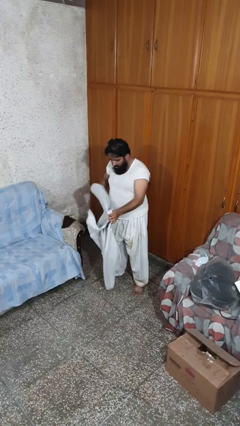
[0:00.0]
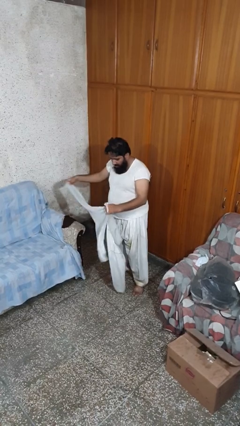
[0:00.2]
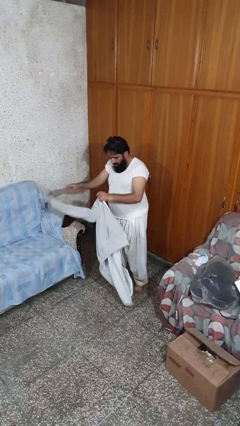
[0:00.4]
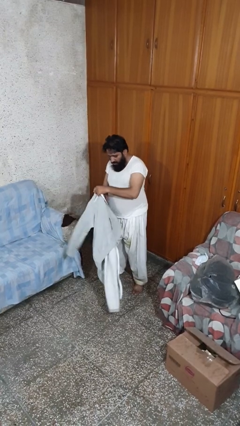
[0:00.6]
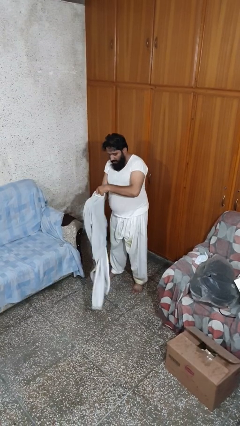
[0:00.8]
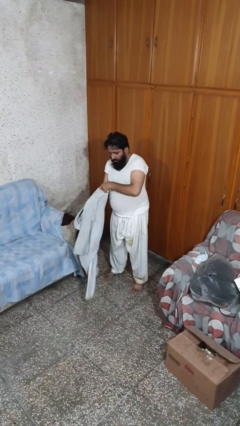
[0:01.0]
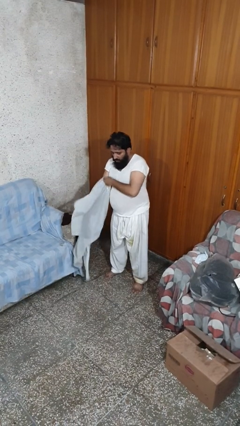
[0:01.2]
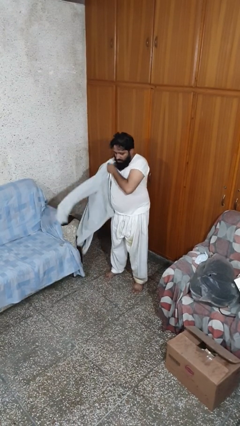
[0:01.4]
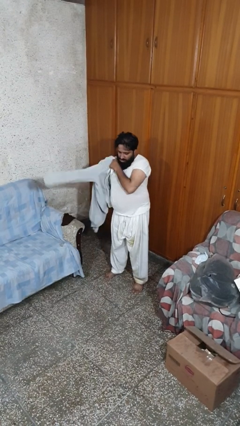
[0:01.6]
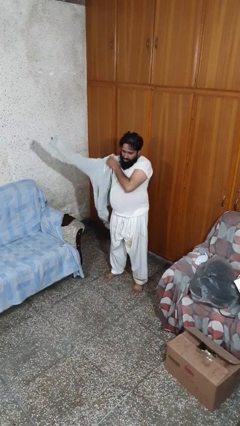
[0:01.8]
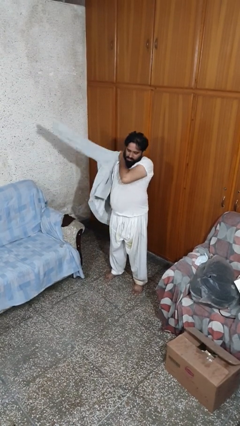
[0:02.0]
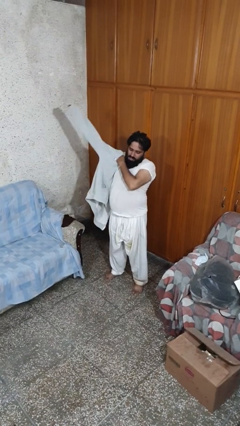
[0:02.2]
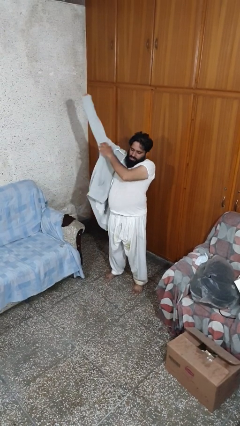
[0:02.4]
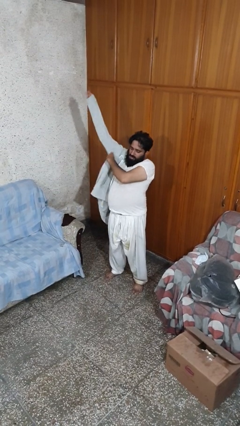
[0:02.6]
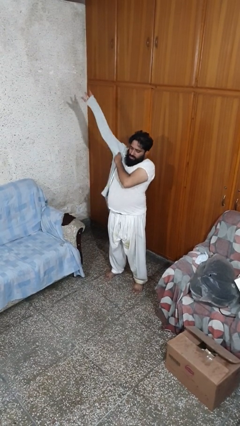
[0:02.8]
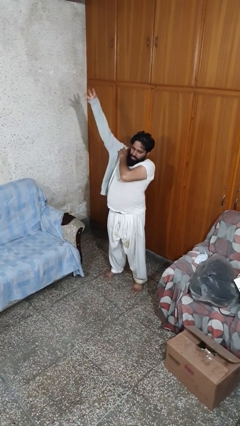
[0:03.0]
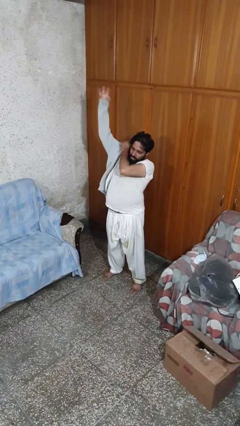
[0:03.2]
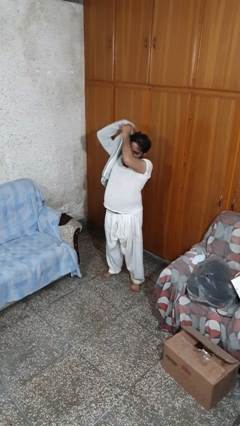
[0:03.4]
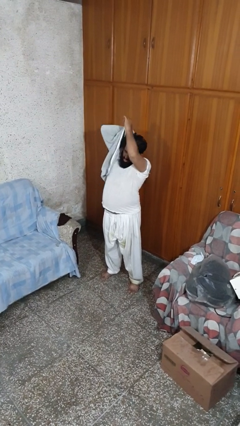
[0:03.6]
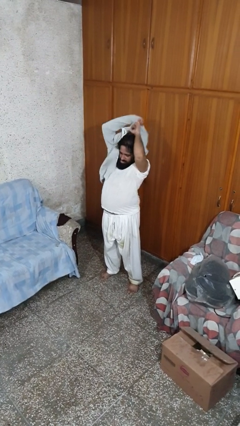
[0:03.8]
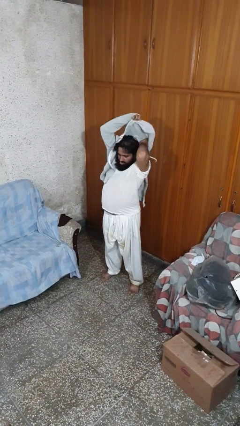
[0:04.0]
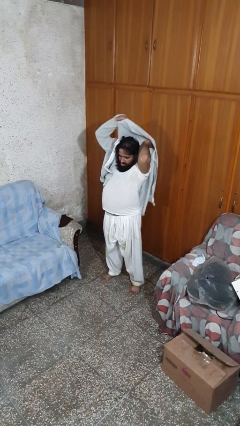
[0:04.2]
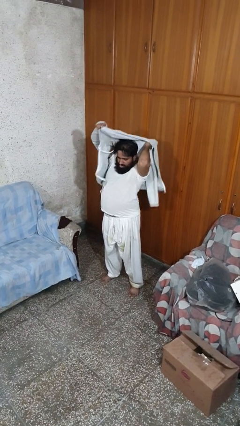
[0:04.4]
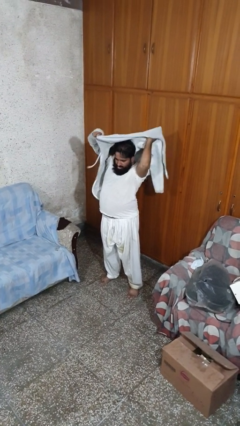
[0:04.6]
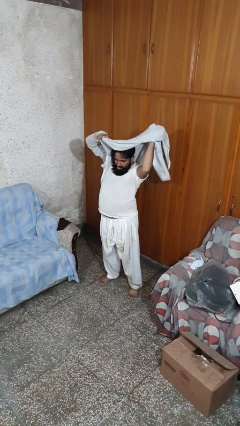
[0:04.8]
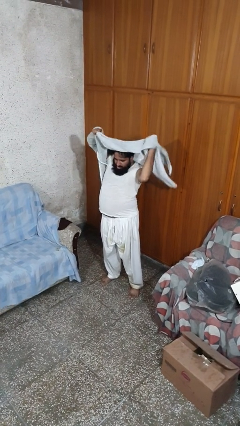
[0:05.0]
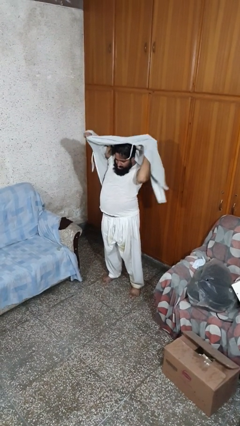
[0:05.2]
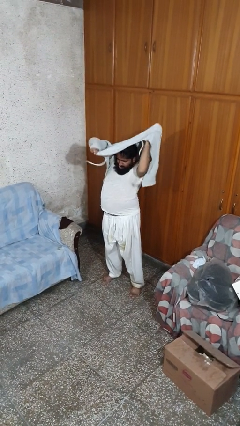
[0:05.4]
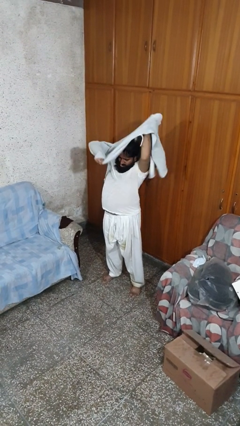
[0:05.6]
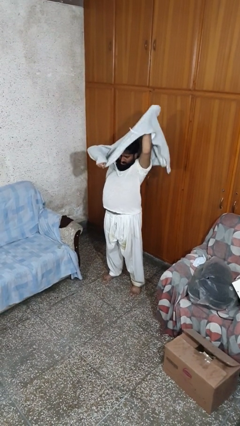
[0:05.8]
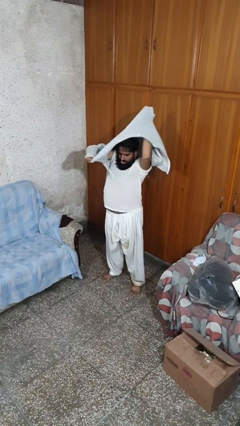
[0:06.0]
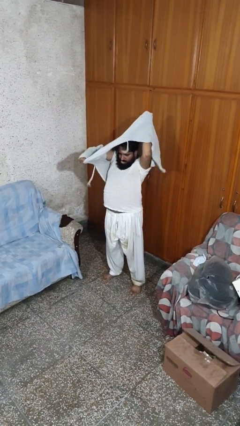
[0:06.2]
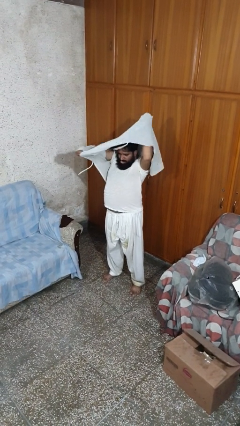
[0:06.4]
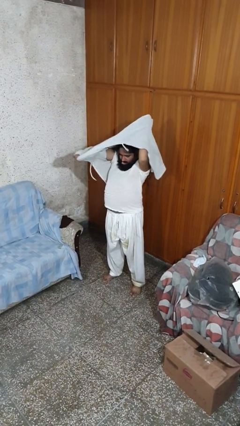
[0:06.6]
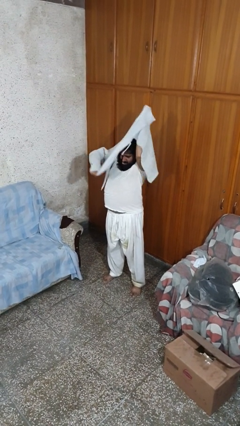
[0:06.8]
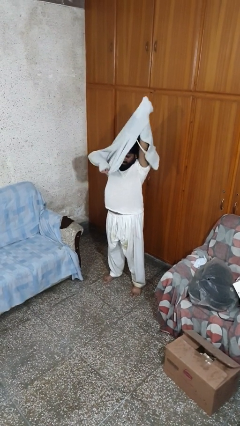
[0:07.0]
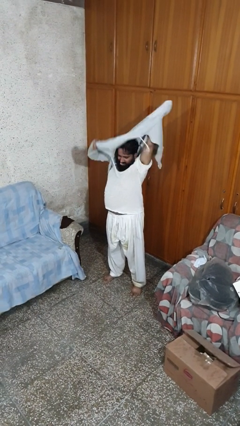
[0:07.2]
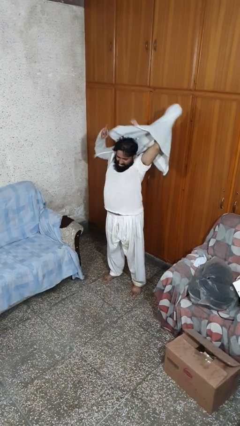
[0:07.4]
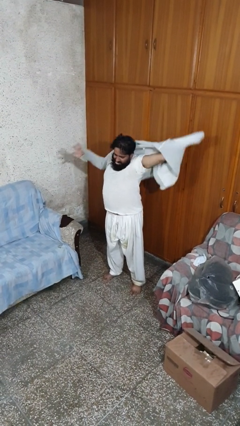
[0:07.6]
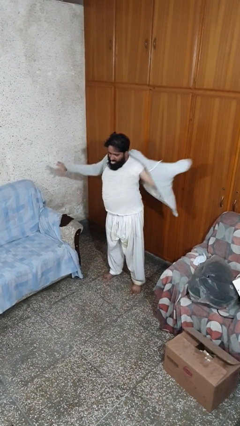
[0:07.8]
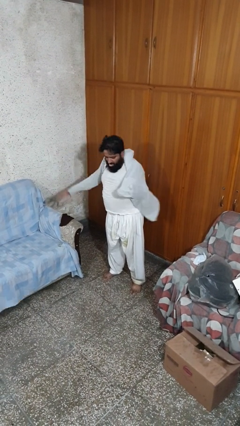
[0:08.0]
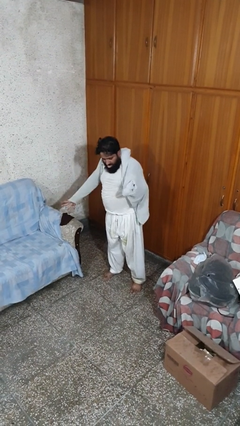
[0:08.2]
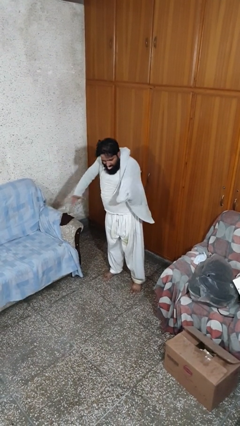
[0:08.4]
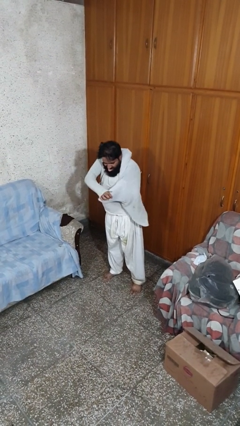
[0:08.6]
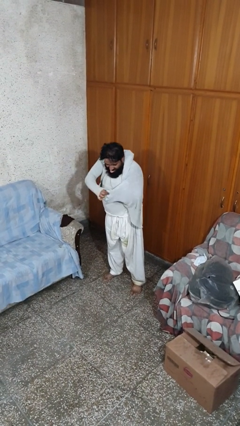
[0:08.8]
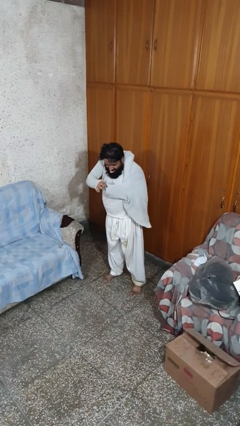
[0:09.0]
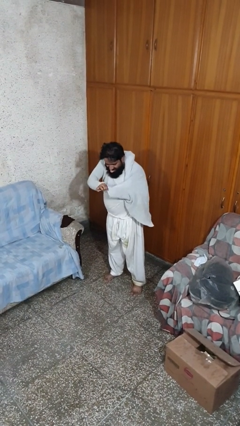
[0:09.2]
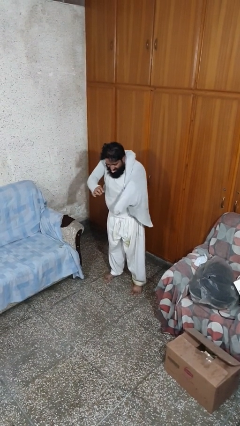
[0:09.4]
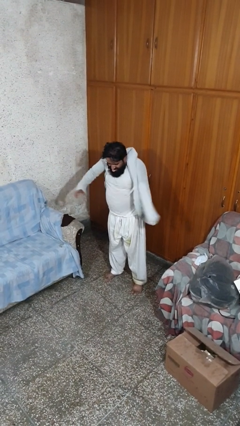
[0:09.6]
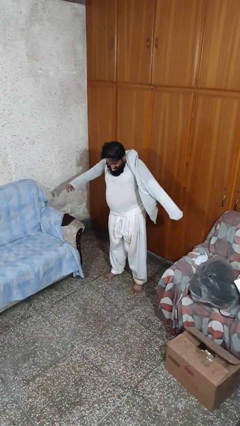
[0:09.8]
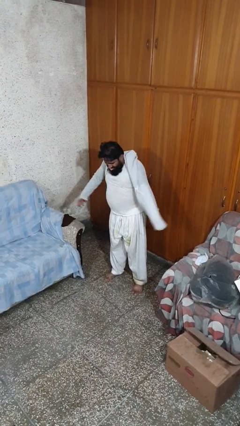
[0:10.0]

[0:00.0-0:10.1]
person puts on jacket

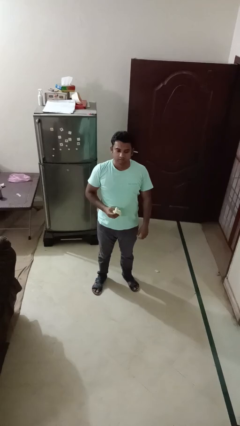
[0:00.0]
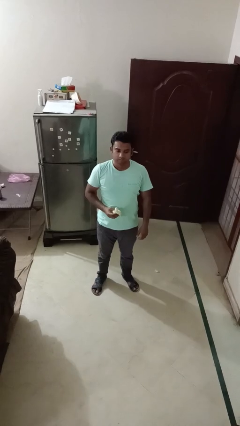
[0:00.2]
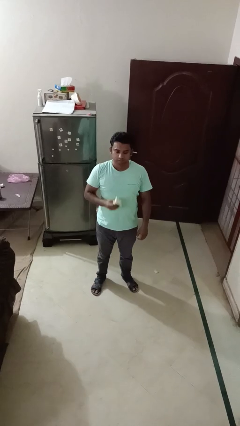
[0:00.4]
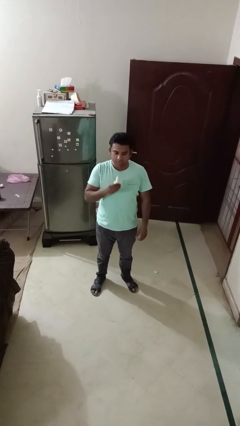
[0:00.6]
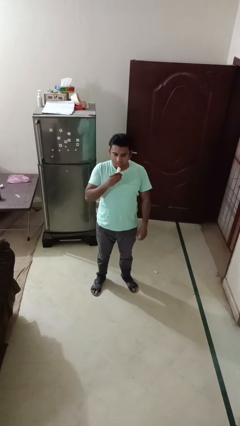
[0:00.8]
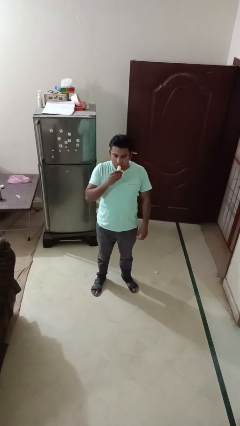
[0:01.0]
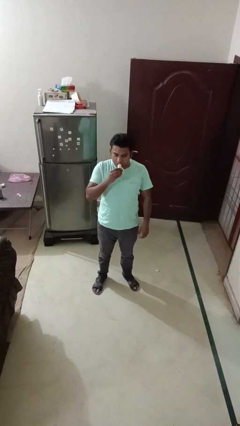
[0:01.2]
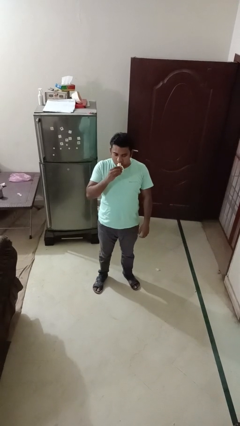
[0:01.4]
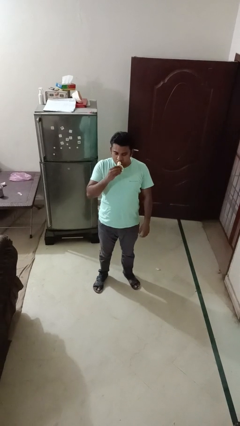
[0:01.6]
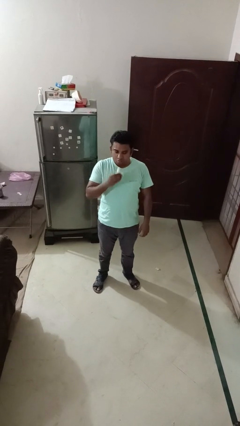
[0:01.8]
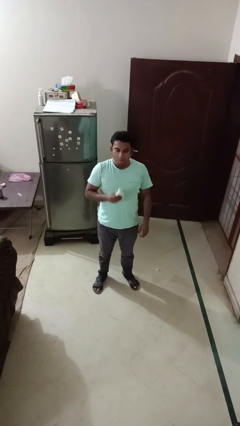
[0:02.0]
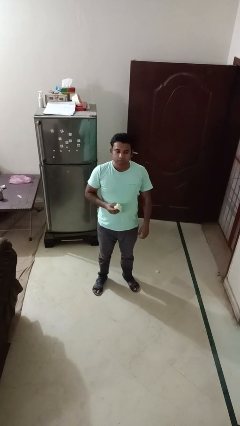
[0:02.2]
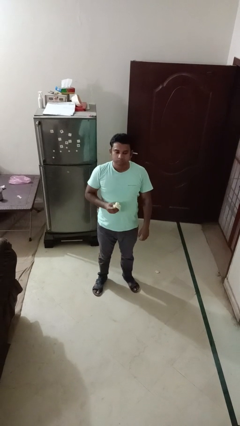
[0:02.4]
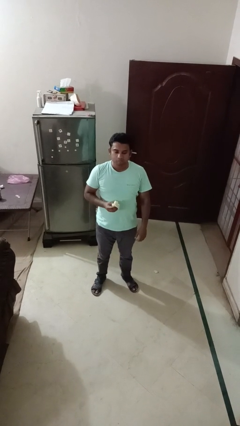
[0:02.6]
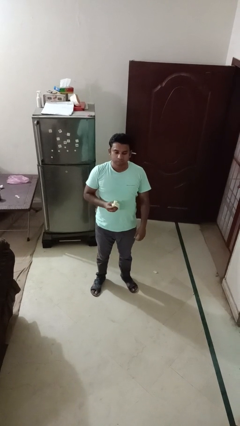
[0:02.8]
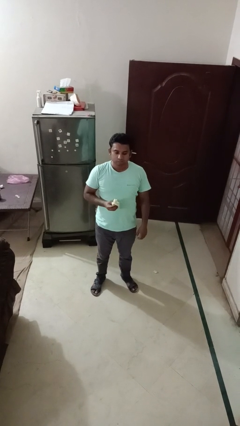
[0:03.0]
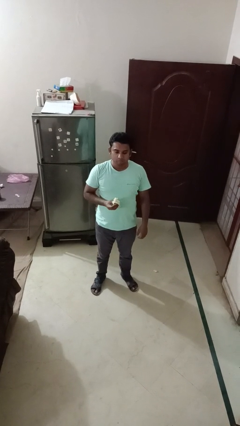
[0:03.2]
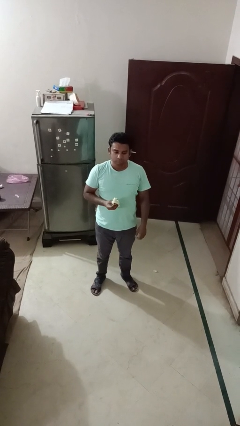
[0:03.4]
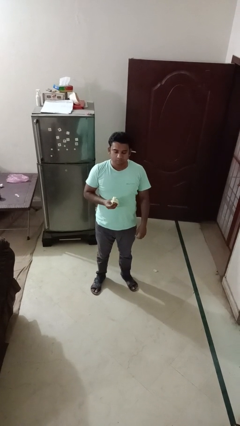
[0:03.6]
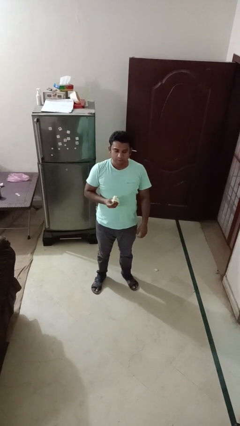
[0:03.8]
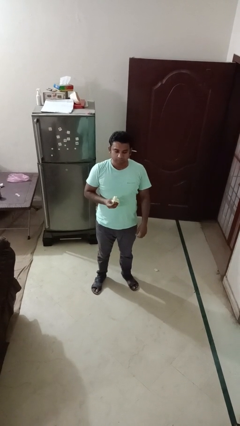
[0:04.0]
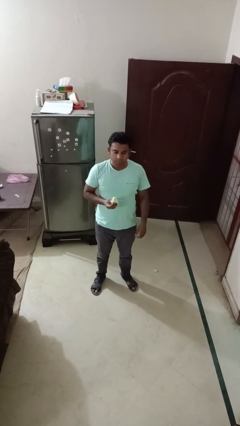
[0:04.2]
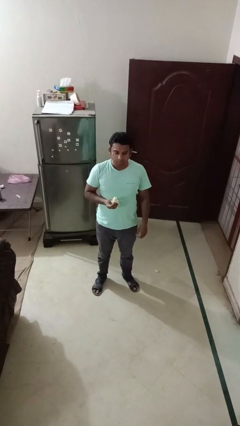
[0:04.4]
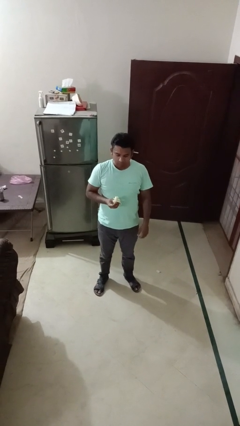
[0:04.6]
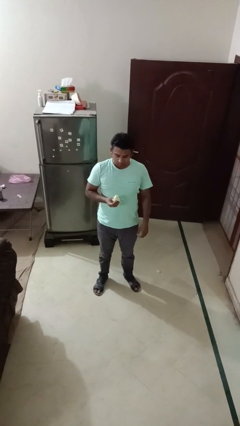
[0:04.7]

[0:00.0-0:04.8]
person eats banana

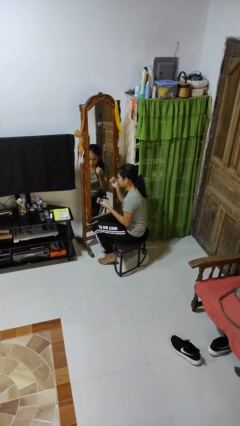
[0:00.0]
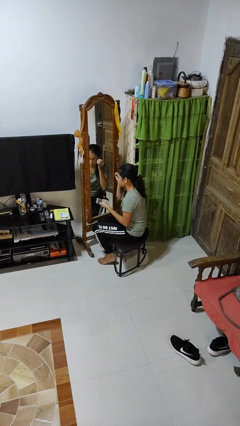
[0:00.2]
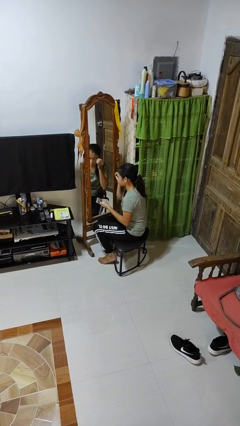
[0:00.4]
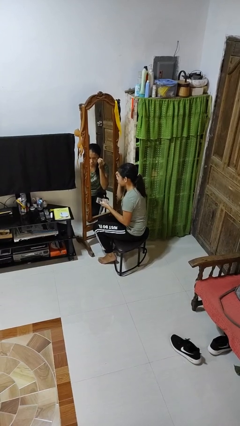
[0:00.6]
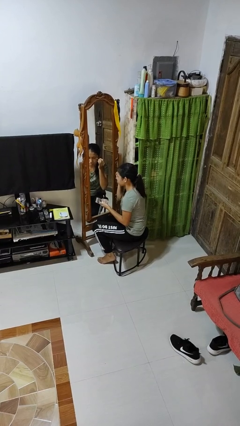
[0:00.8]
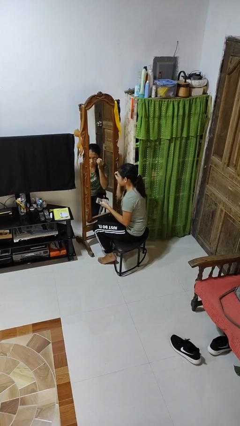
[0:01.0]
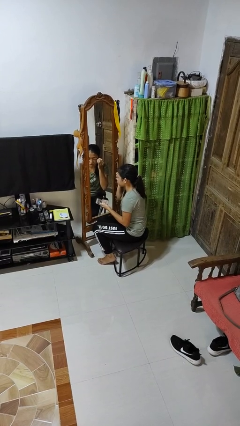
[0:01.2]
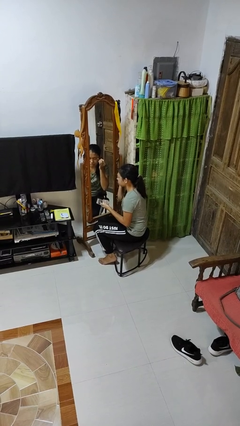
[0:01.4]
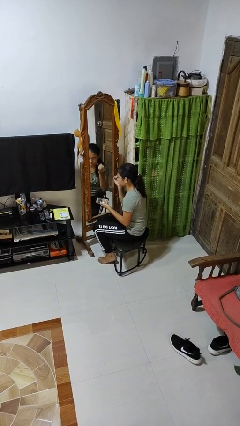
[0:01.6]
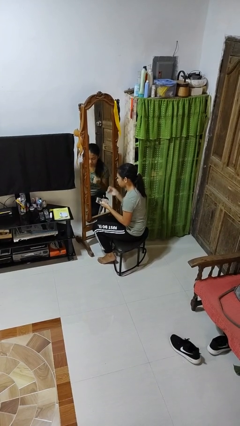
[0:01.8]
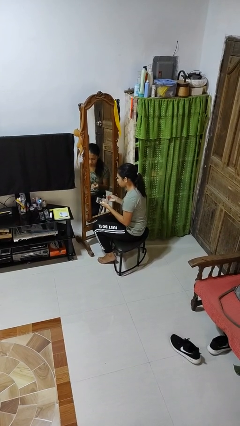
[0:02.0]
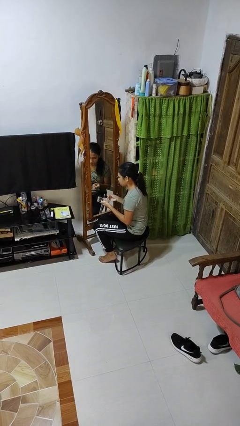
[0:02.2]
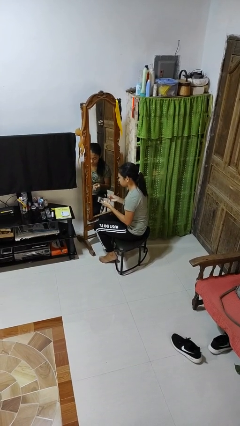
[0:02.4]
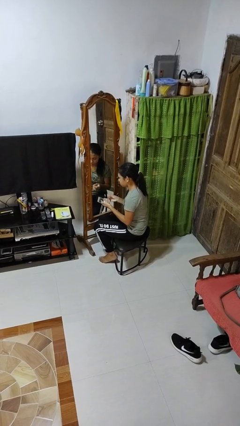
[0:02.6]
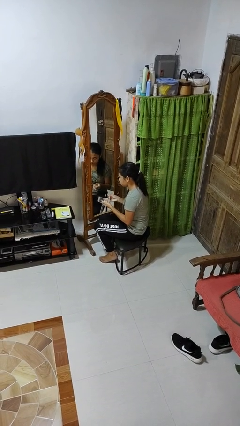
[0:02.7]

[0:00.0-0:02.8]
person applies eye makeup
